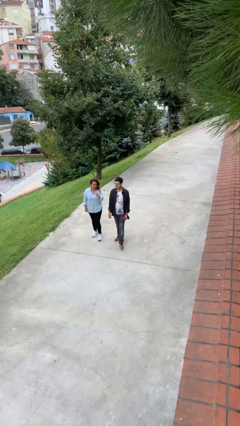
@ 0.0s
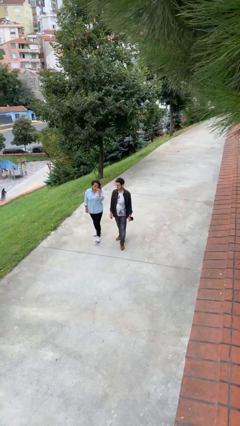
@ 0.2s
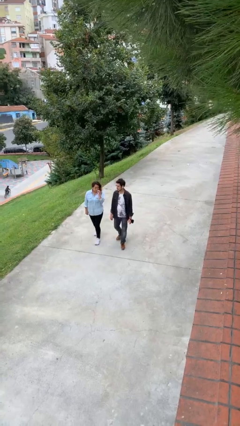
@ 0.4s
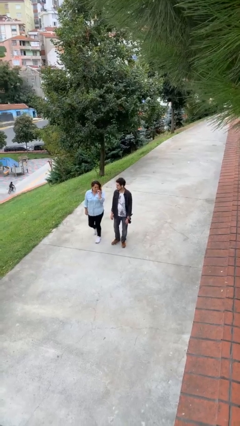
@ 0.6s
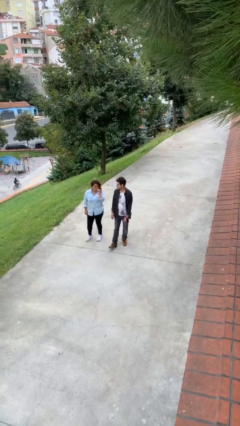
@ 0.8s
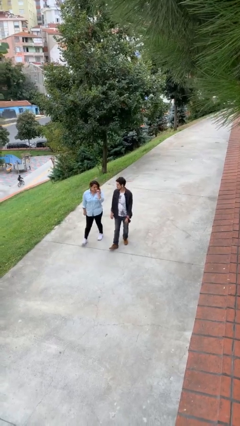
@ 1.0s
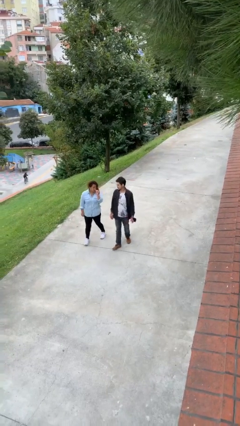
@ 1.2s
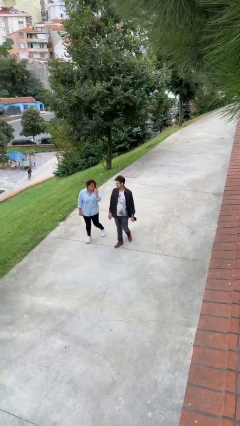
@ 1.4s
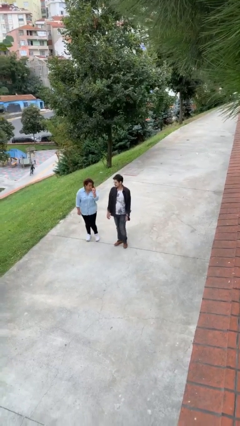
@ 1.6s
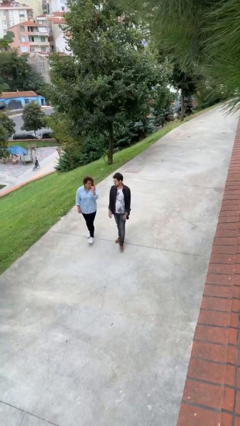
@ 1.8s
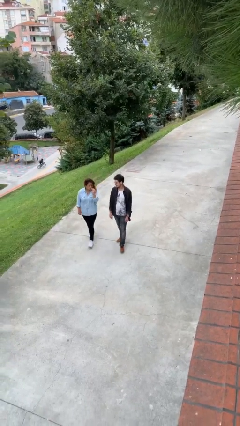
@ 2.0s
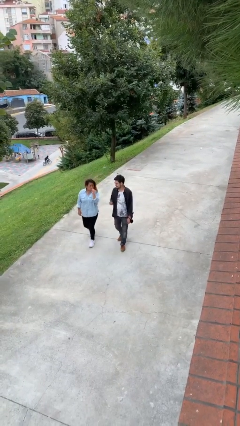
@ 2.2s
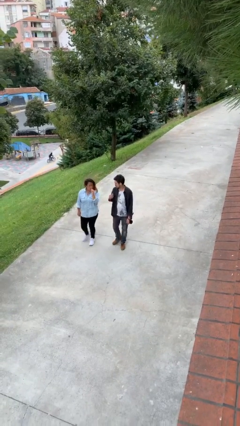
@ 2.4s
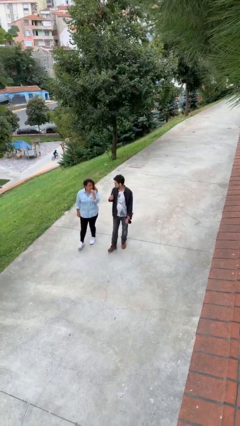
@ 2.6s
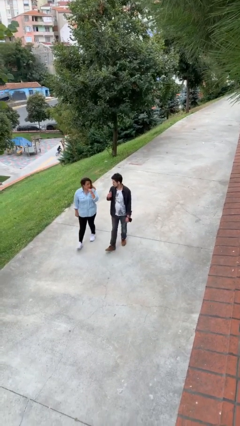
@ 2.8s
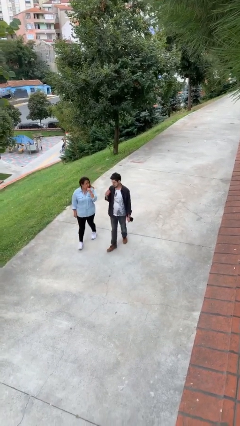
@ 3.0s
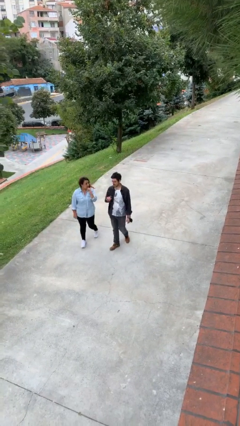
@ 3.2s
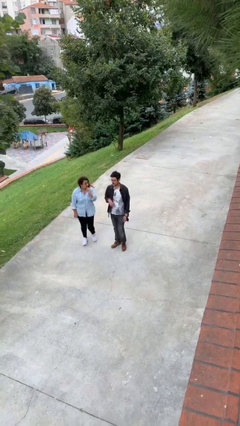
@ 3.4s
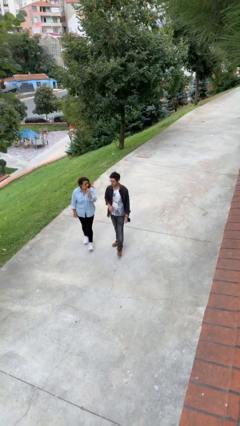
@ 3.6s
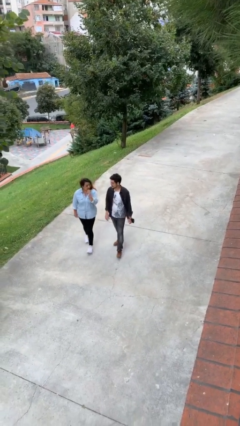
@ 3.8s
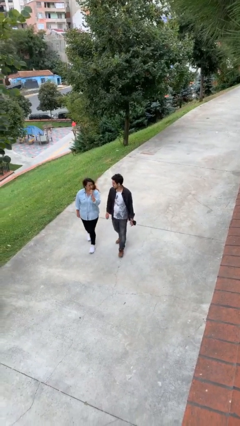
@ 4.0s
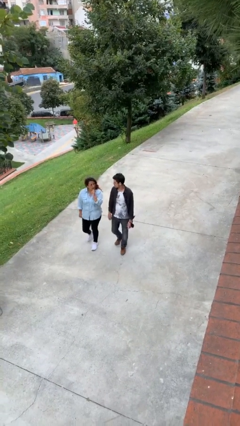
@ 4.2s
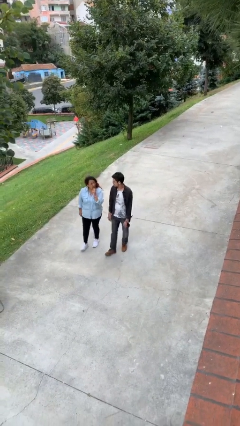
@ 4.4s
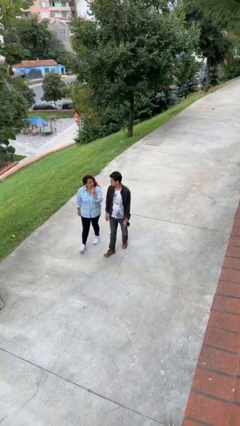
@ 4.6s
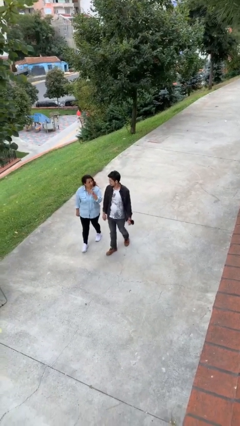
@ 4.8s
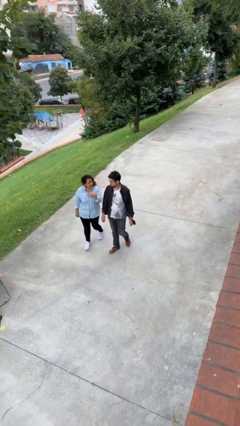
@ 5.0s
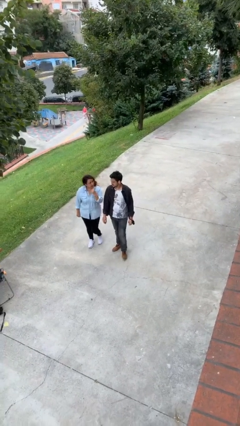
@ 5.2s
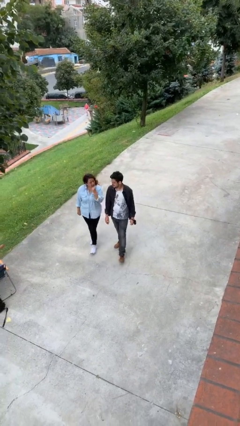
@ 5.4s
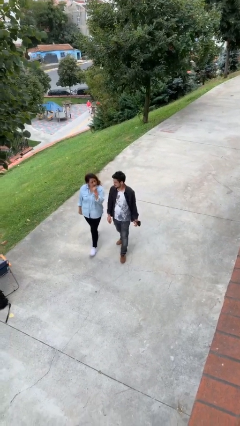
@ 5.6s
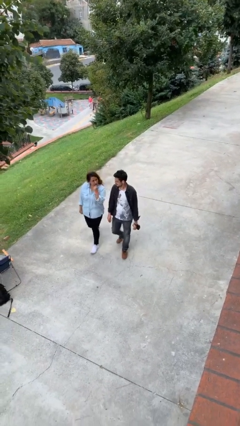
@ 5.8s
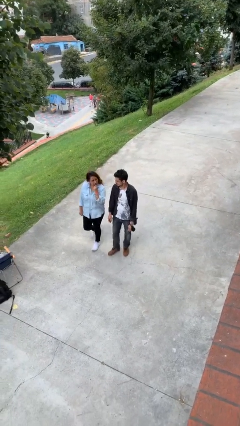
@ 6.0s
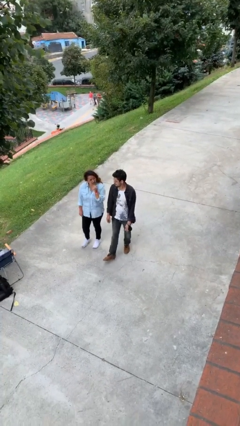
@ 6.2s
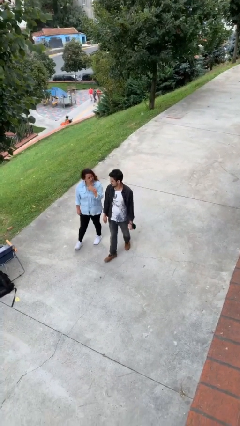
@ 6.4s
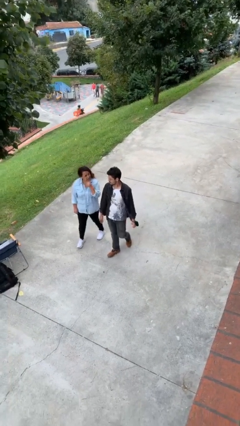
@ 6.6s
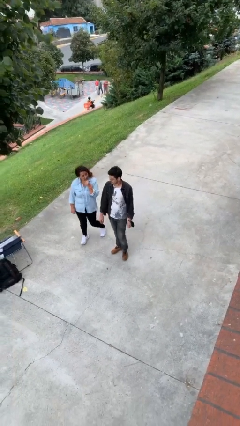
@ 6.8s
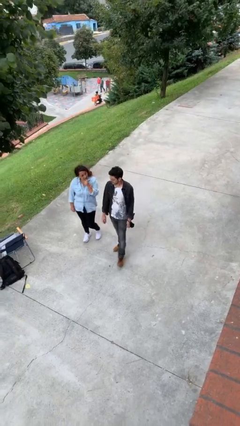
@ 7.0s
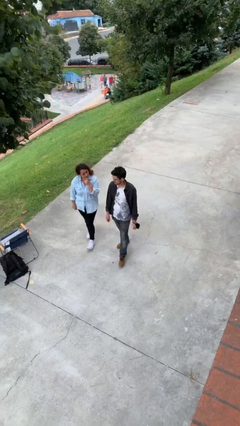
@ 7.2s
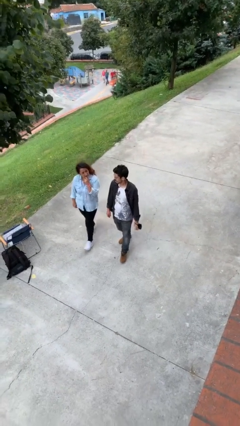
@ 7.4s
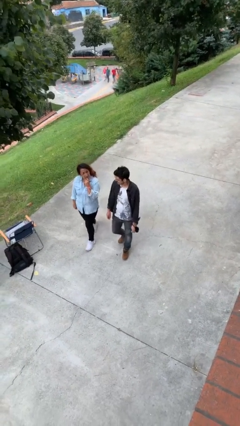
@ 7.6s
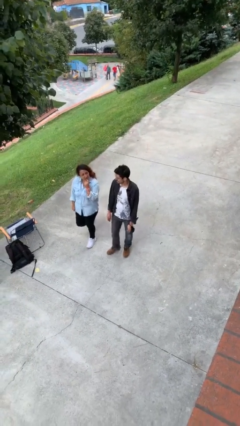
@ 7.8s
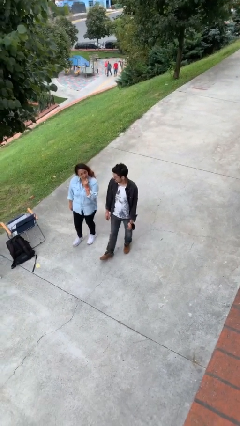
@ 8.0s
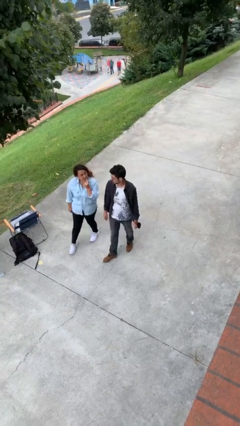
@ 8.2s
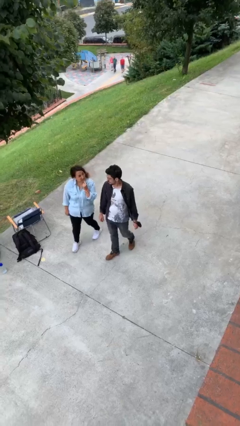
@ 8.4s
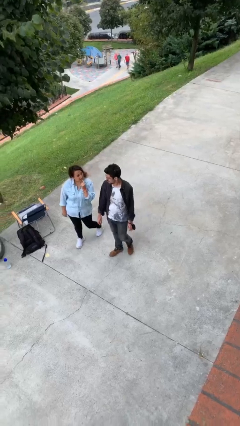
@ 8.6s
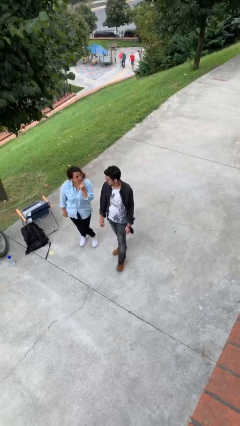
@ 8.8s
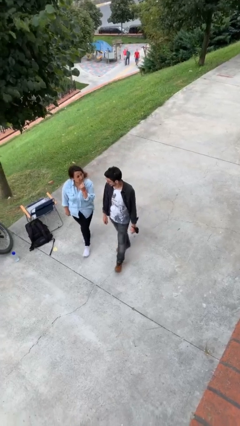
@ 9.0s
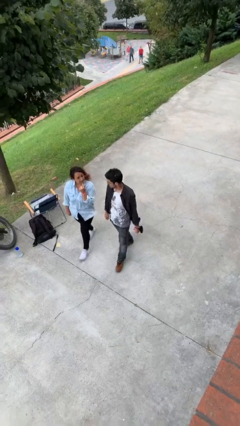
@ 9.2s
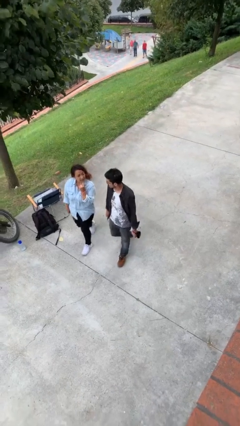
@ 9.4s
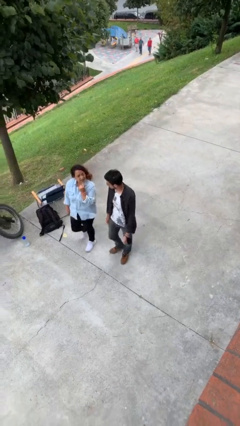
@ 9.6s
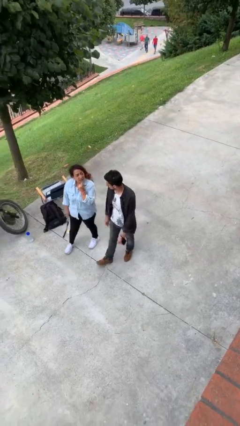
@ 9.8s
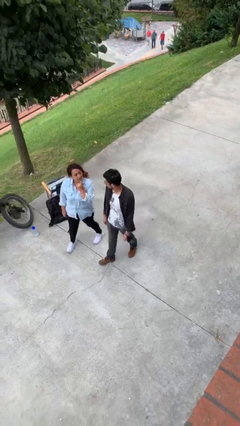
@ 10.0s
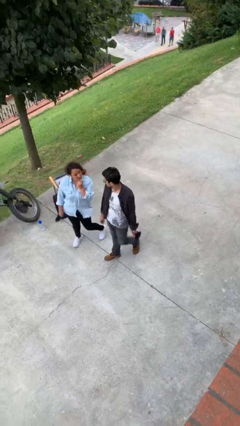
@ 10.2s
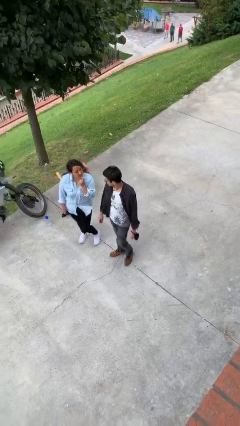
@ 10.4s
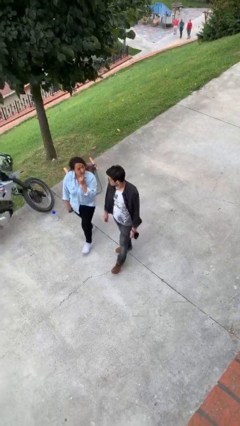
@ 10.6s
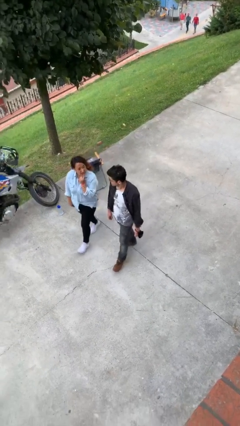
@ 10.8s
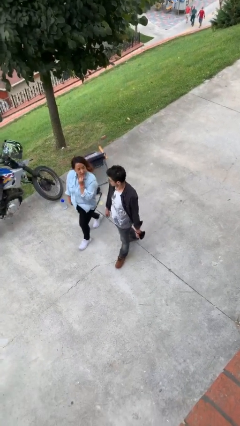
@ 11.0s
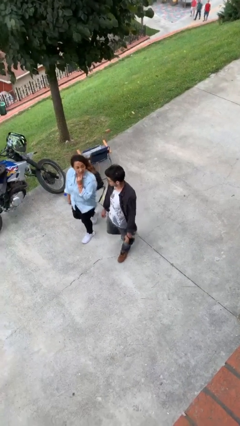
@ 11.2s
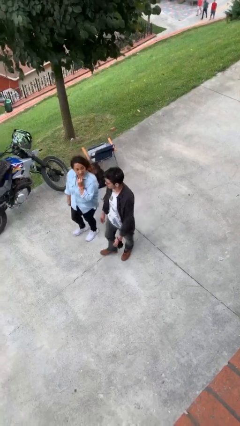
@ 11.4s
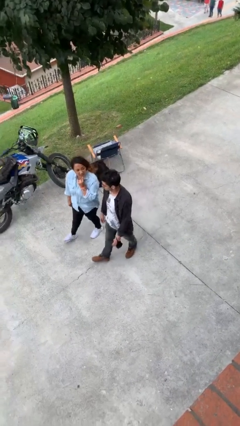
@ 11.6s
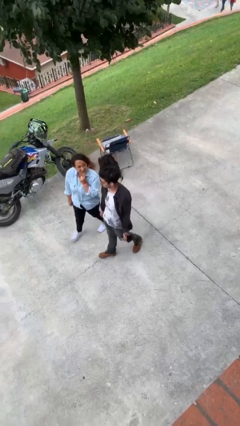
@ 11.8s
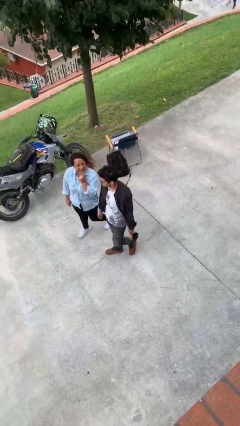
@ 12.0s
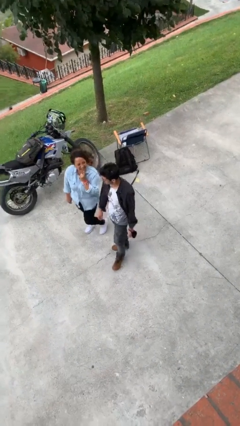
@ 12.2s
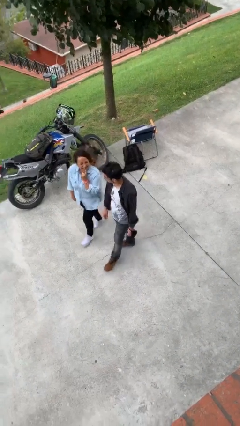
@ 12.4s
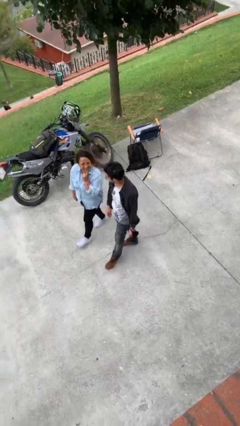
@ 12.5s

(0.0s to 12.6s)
person talks to person

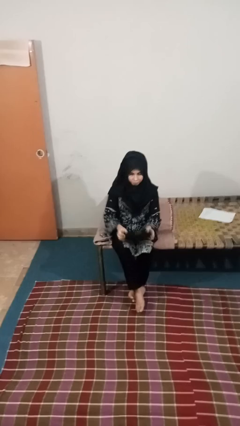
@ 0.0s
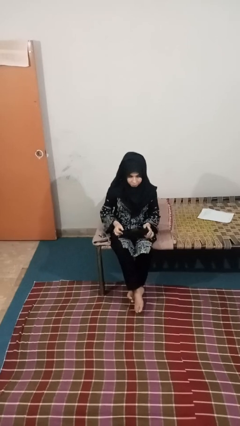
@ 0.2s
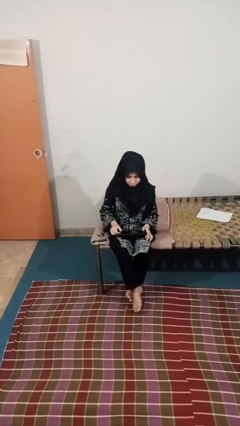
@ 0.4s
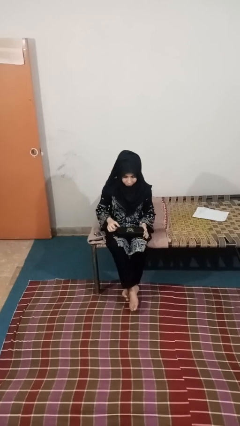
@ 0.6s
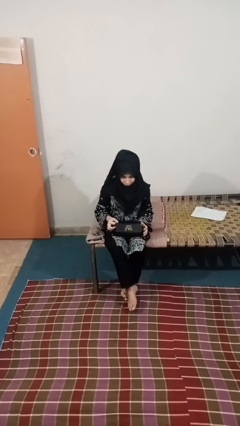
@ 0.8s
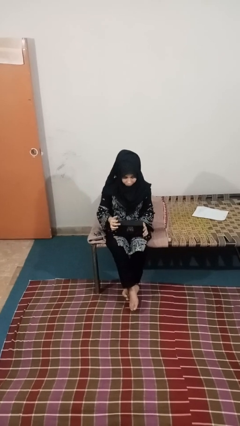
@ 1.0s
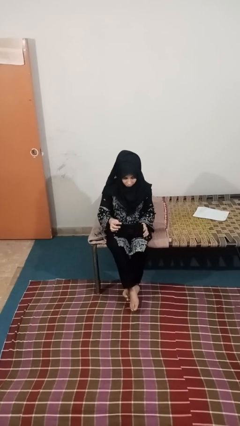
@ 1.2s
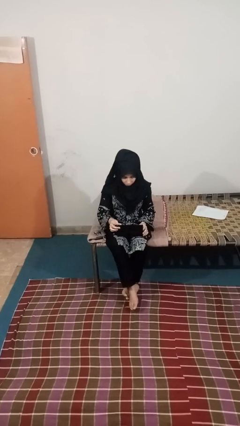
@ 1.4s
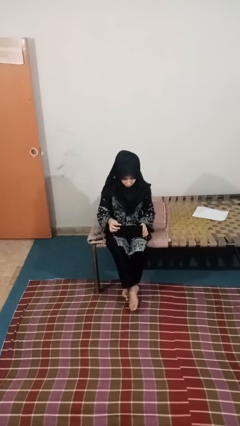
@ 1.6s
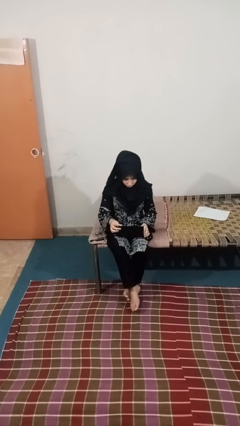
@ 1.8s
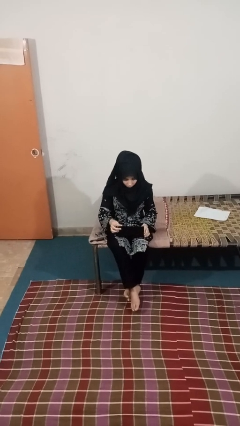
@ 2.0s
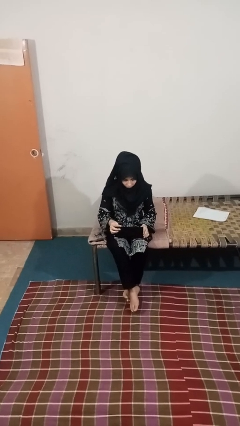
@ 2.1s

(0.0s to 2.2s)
person opens jewelry box

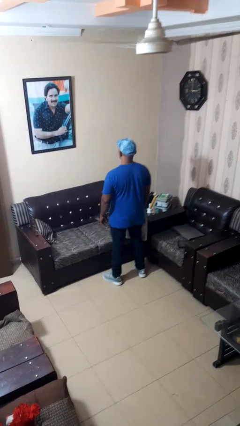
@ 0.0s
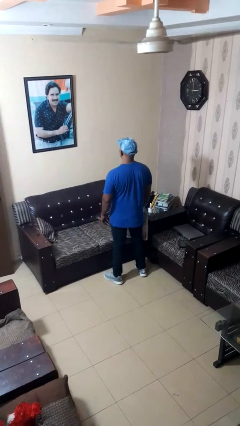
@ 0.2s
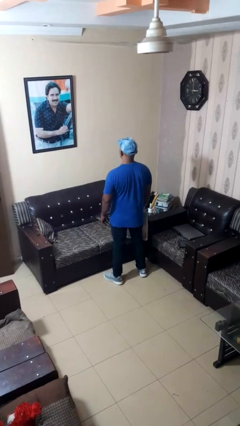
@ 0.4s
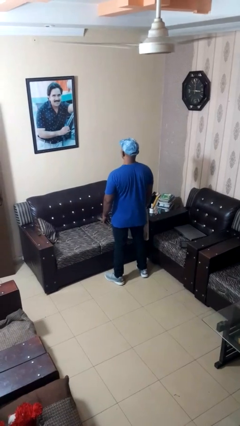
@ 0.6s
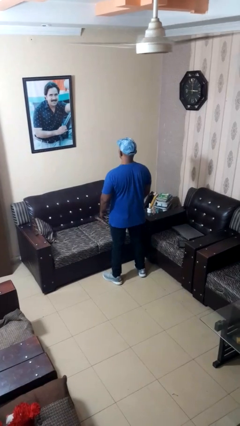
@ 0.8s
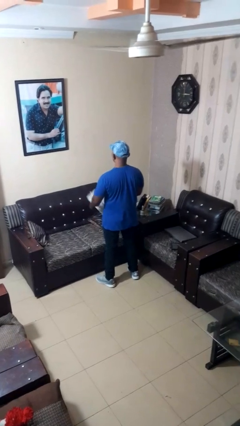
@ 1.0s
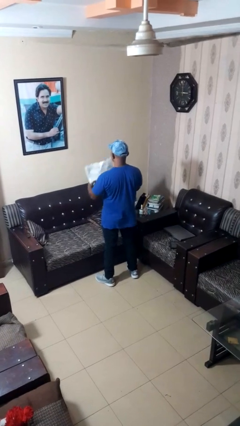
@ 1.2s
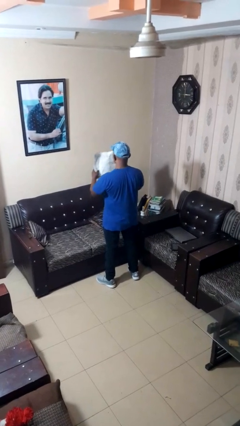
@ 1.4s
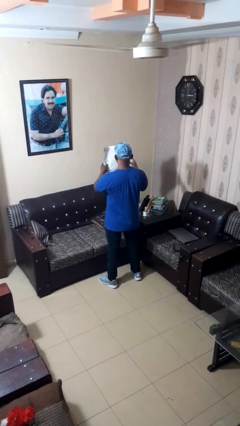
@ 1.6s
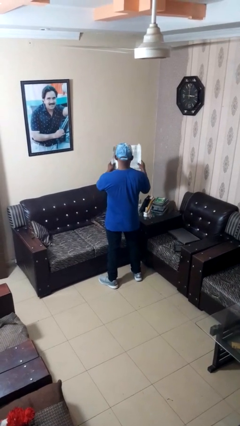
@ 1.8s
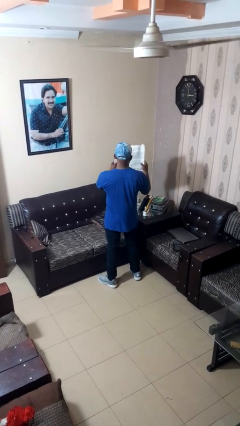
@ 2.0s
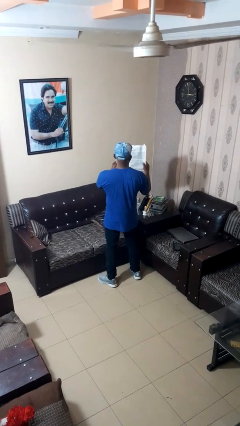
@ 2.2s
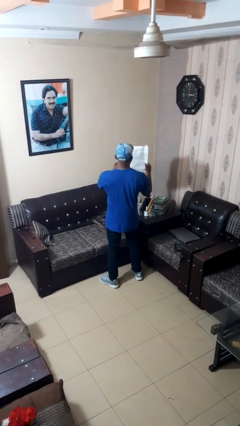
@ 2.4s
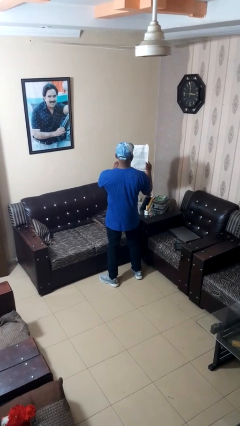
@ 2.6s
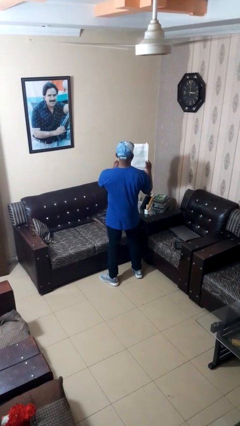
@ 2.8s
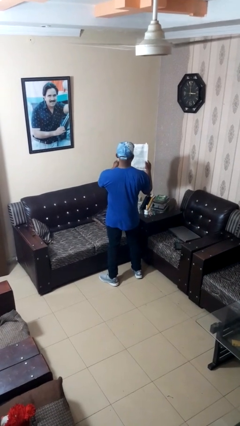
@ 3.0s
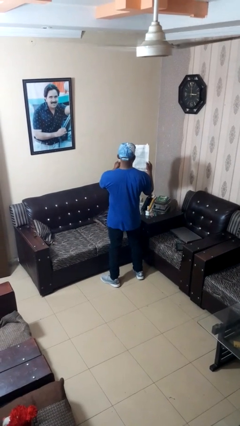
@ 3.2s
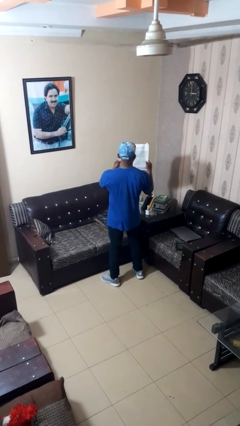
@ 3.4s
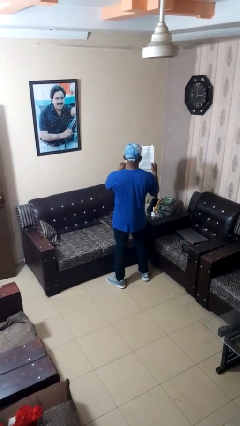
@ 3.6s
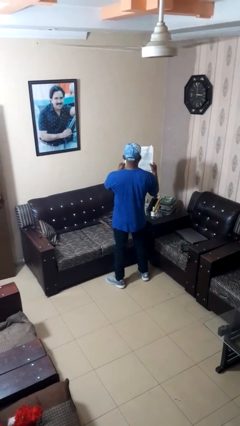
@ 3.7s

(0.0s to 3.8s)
person reads newspaper
